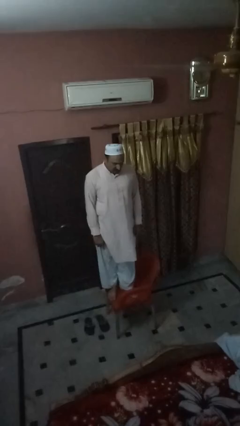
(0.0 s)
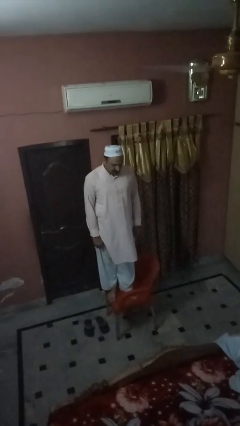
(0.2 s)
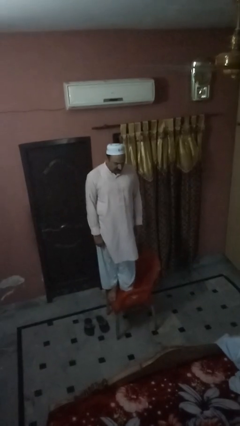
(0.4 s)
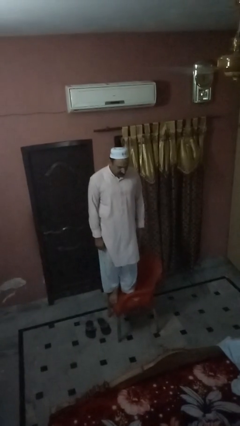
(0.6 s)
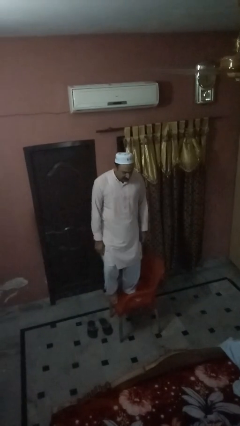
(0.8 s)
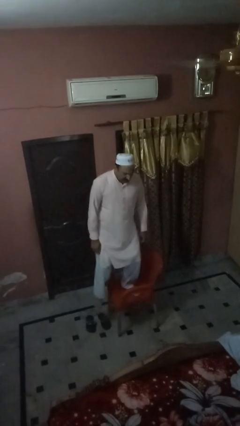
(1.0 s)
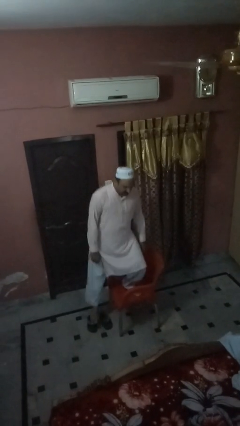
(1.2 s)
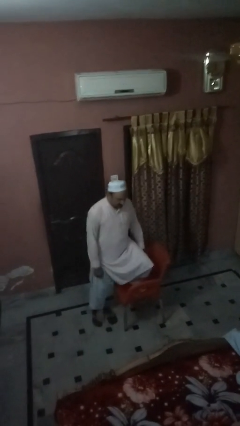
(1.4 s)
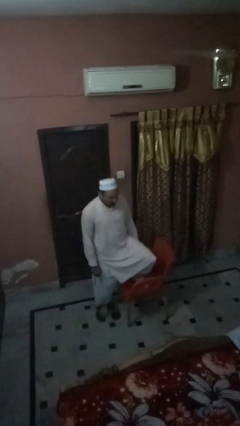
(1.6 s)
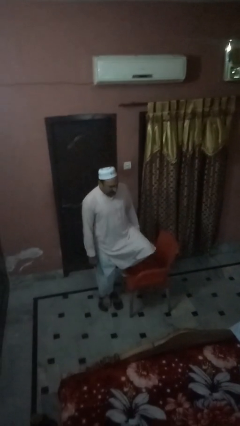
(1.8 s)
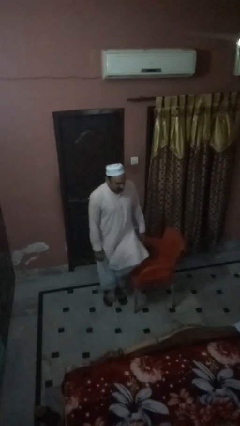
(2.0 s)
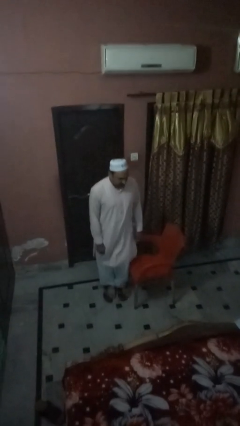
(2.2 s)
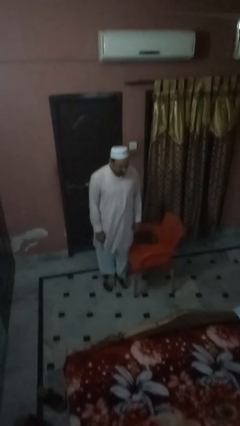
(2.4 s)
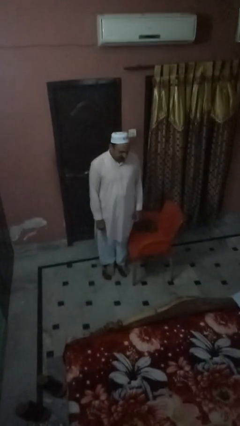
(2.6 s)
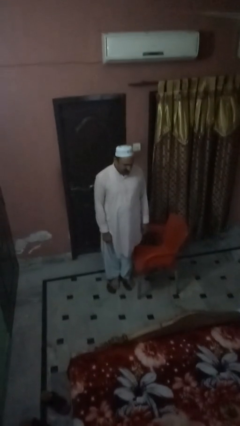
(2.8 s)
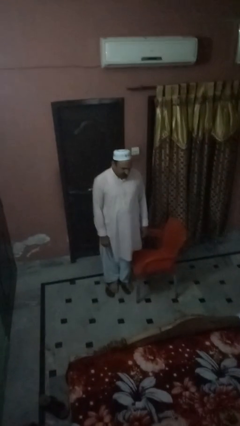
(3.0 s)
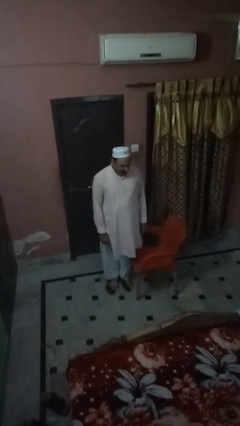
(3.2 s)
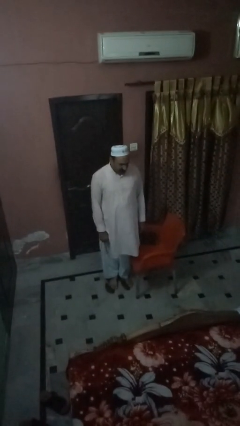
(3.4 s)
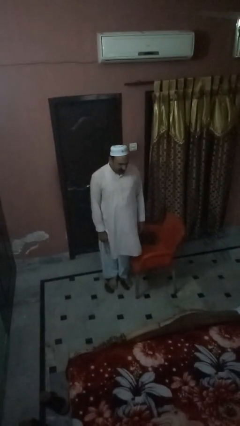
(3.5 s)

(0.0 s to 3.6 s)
person climbs off chair

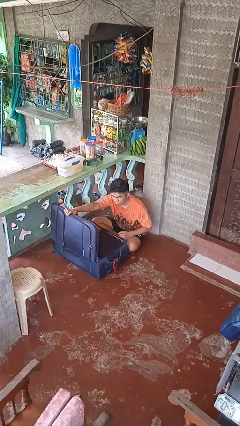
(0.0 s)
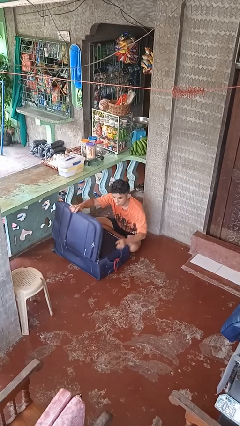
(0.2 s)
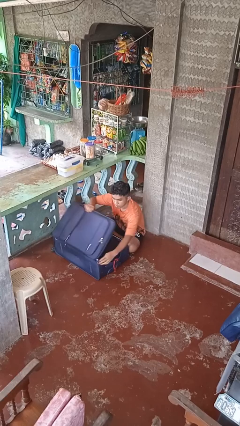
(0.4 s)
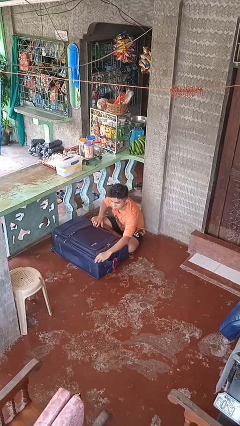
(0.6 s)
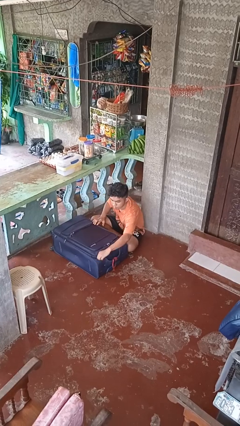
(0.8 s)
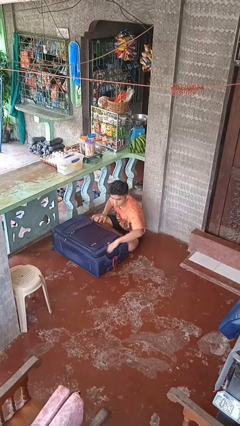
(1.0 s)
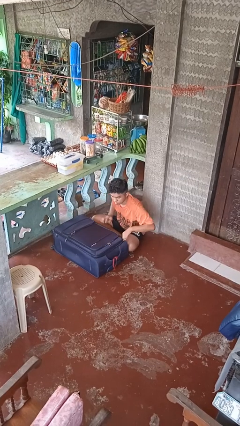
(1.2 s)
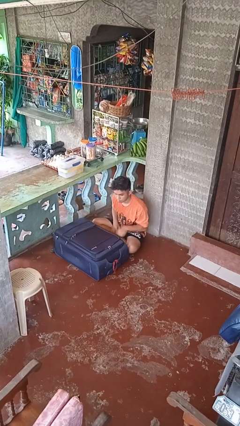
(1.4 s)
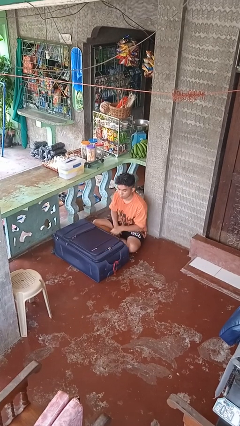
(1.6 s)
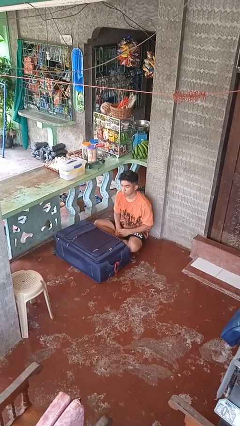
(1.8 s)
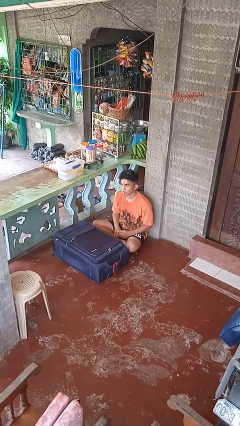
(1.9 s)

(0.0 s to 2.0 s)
person closes suitcase

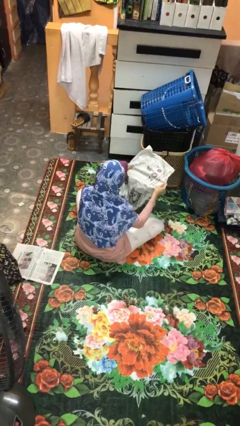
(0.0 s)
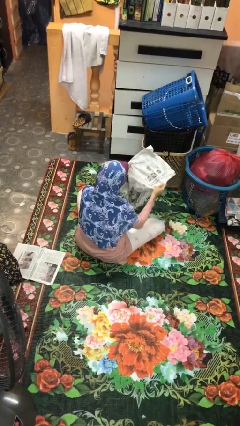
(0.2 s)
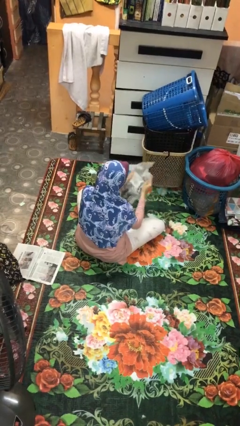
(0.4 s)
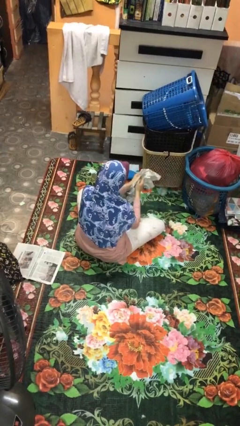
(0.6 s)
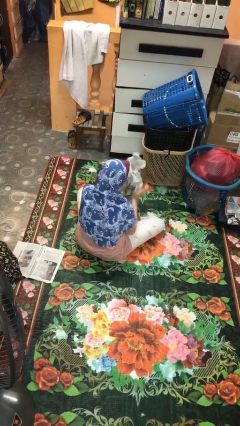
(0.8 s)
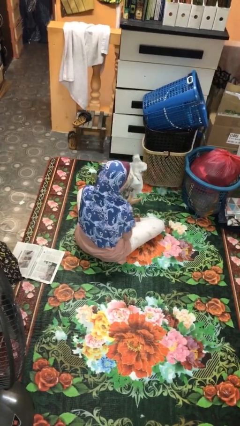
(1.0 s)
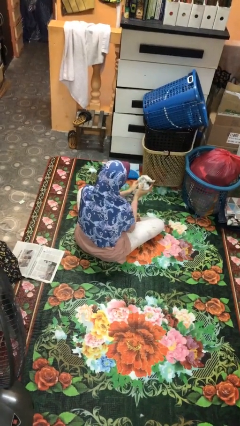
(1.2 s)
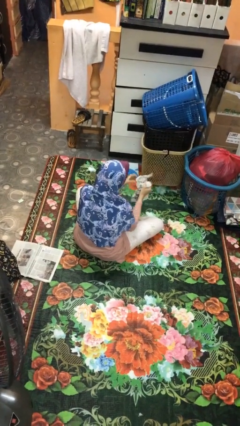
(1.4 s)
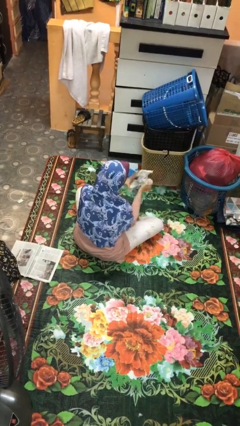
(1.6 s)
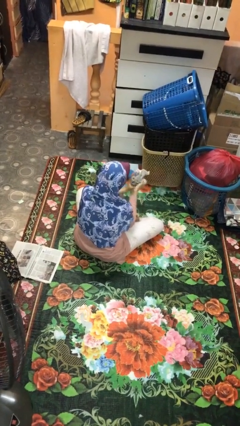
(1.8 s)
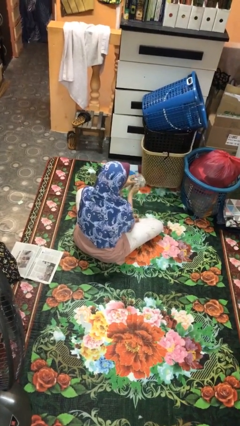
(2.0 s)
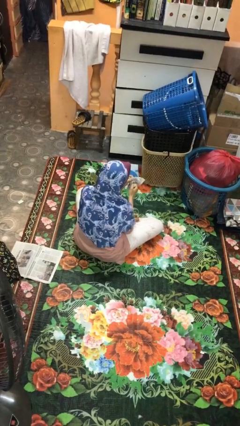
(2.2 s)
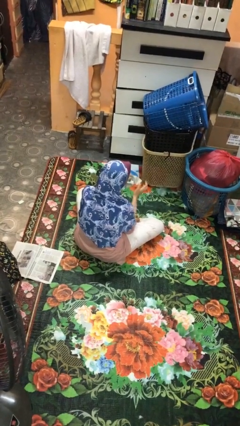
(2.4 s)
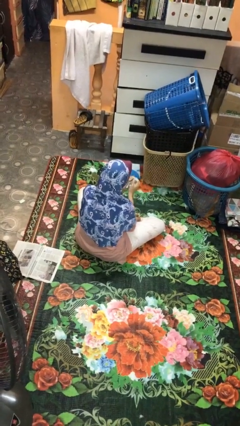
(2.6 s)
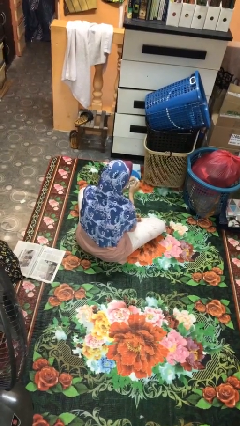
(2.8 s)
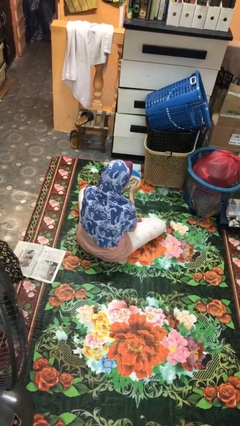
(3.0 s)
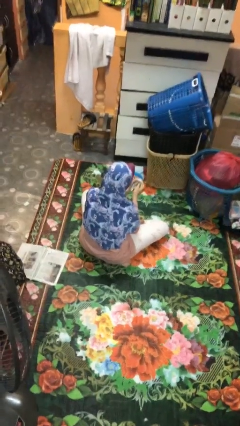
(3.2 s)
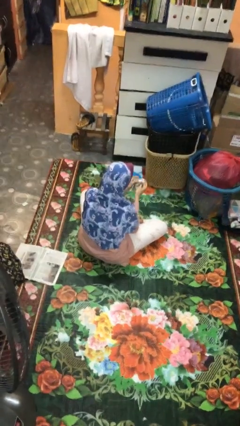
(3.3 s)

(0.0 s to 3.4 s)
person crumples paper

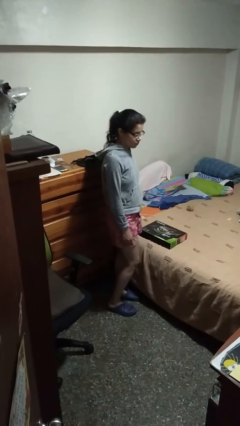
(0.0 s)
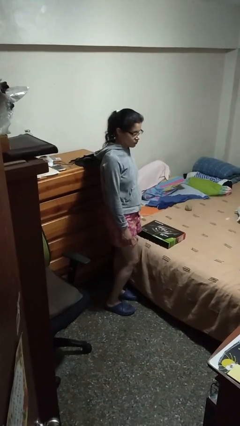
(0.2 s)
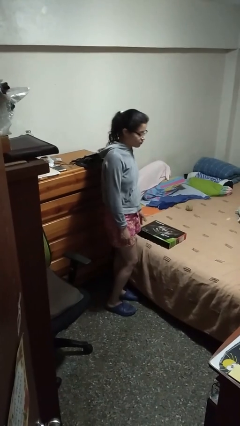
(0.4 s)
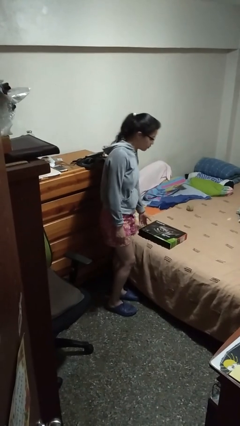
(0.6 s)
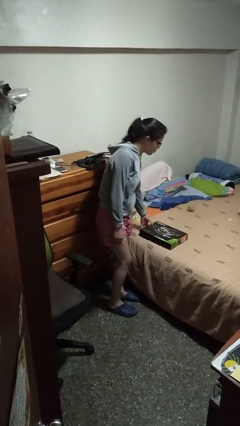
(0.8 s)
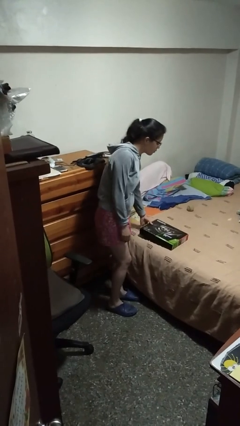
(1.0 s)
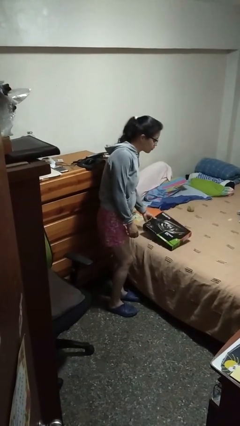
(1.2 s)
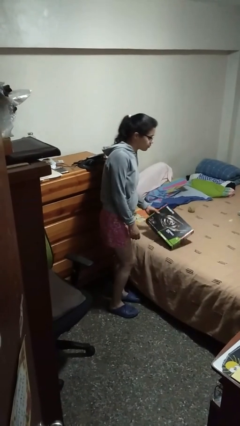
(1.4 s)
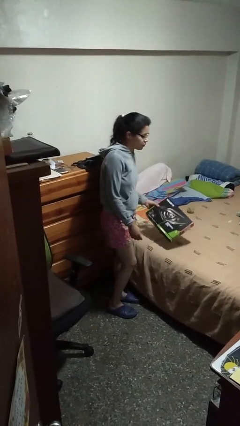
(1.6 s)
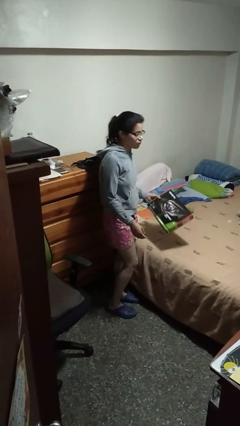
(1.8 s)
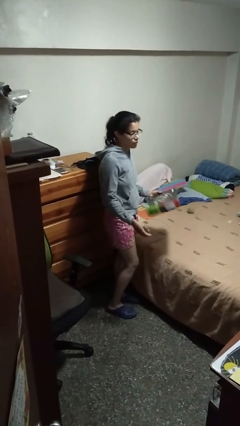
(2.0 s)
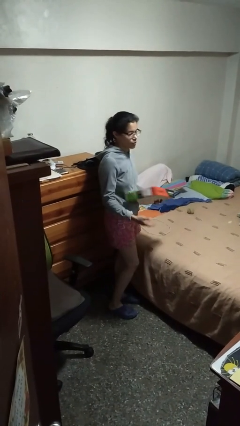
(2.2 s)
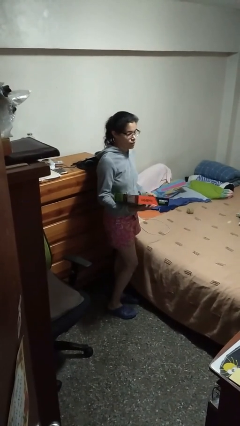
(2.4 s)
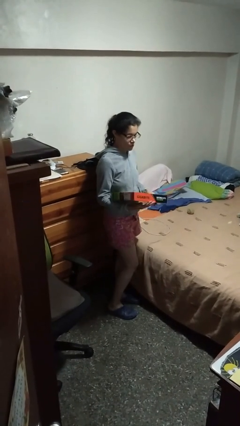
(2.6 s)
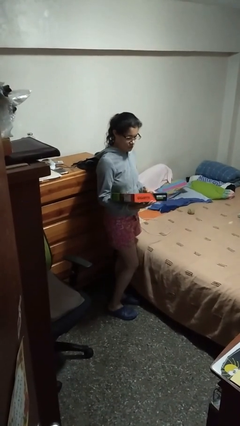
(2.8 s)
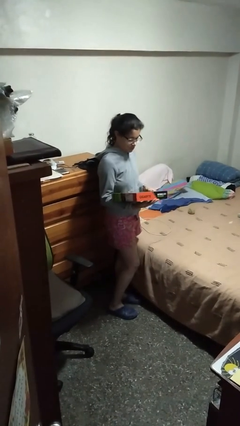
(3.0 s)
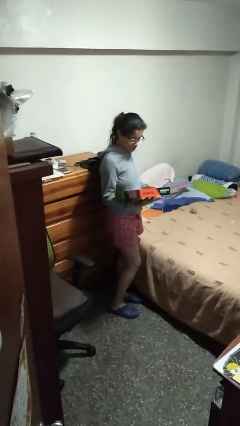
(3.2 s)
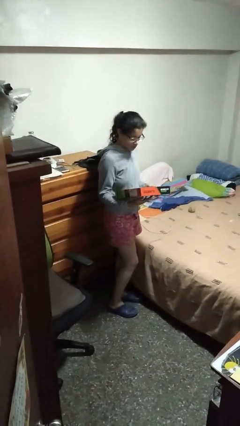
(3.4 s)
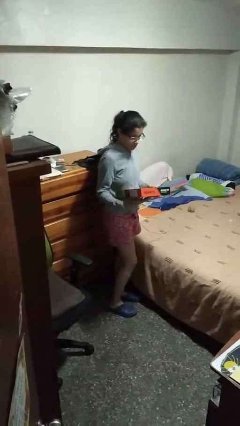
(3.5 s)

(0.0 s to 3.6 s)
person picks up object from bed

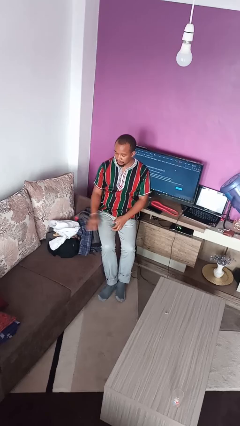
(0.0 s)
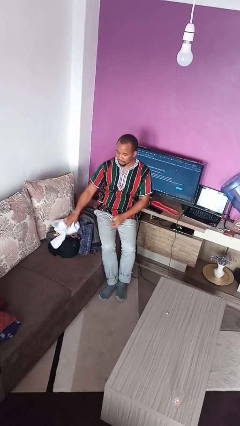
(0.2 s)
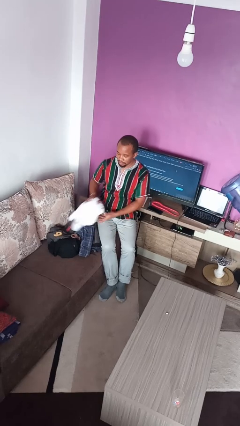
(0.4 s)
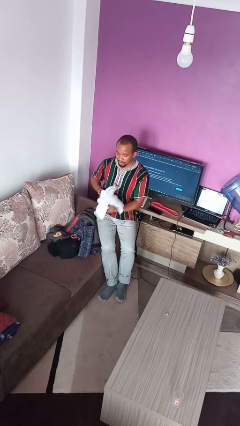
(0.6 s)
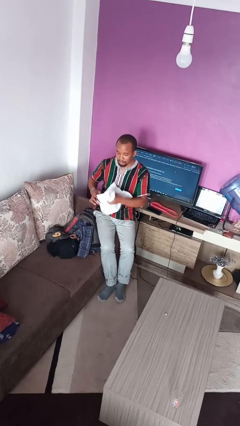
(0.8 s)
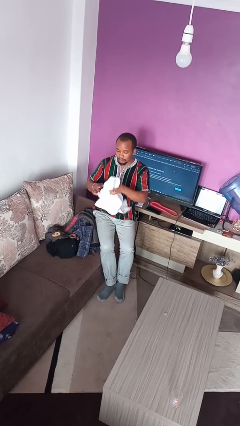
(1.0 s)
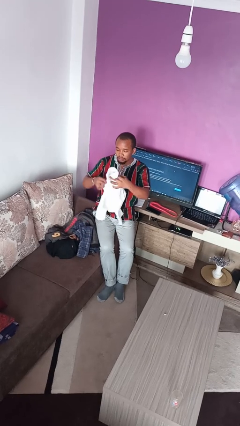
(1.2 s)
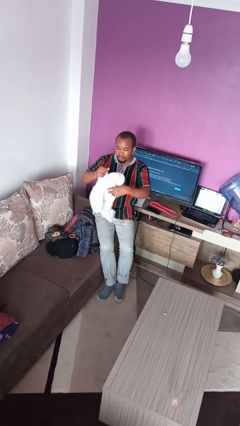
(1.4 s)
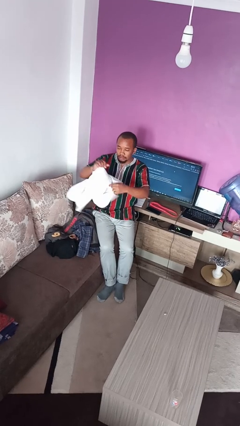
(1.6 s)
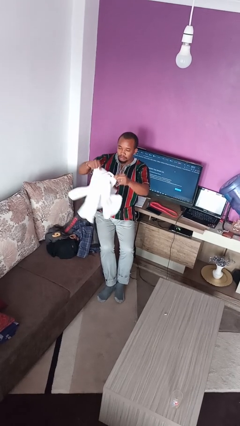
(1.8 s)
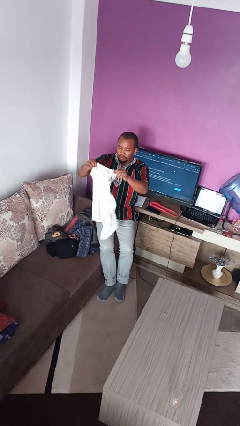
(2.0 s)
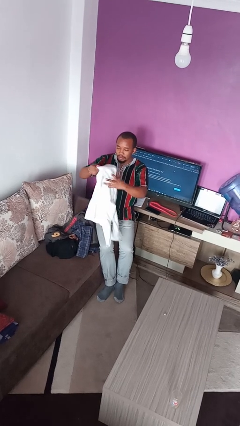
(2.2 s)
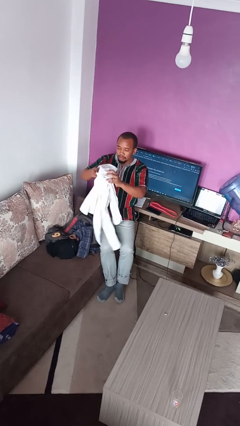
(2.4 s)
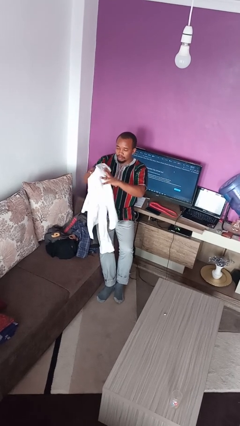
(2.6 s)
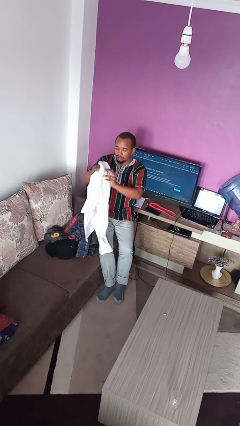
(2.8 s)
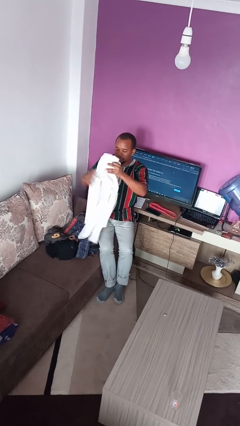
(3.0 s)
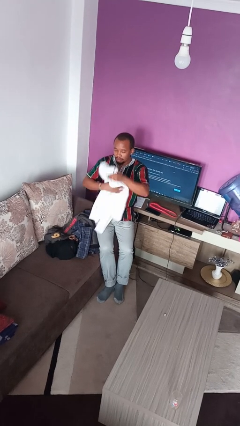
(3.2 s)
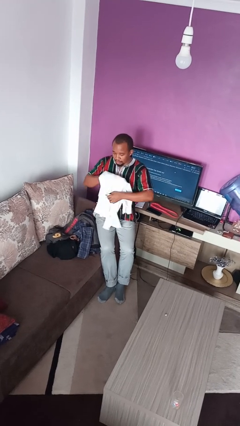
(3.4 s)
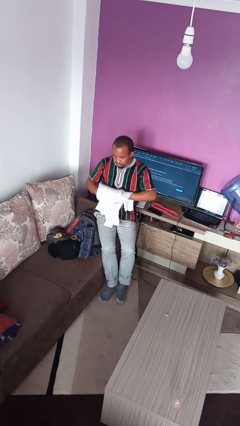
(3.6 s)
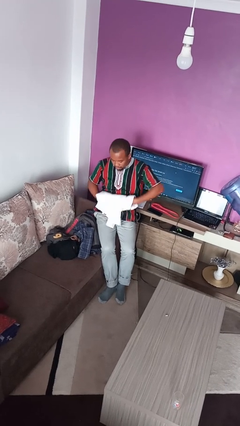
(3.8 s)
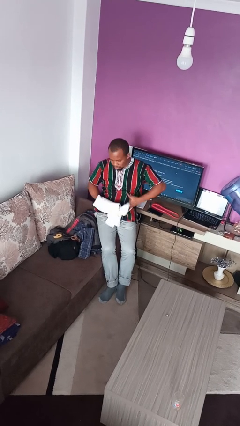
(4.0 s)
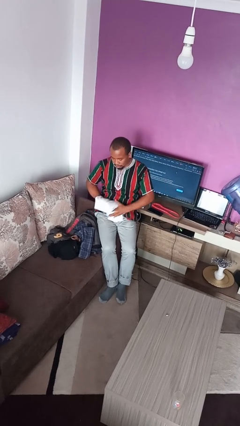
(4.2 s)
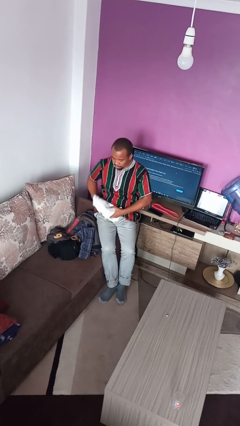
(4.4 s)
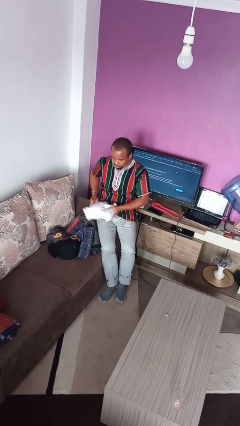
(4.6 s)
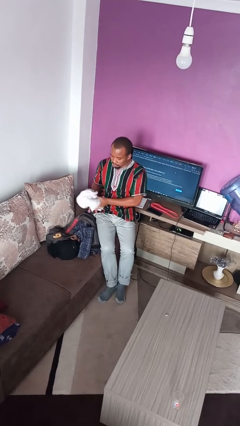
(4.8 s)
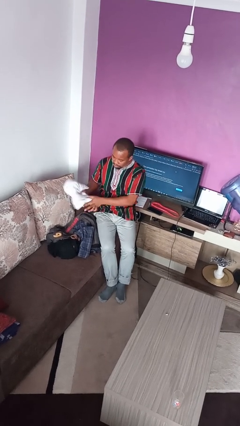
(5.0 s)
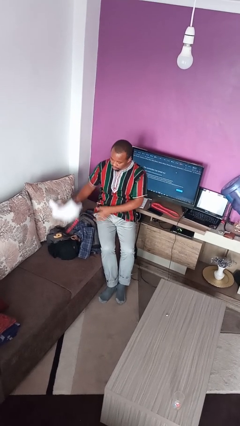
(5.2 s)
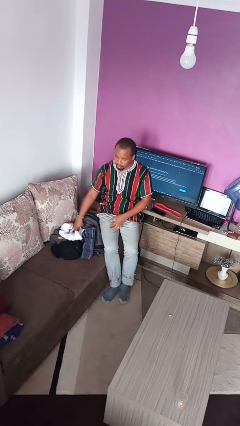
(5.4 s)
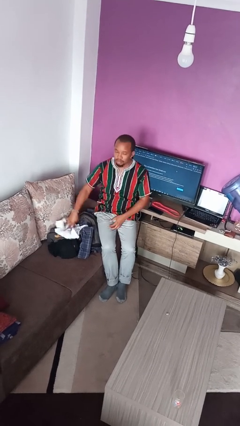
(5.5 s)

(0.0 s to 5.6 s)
person folds shirt
